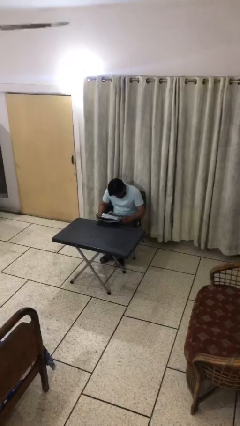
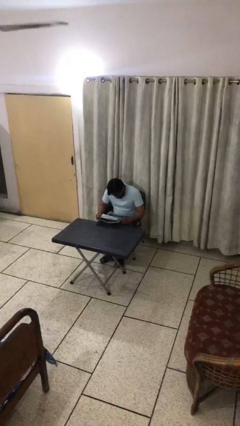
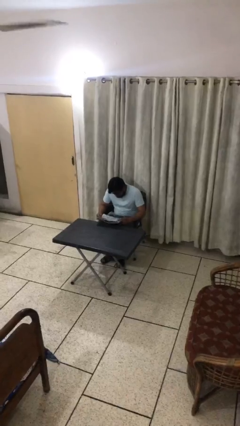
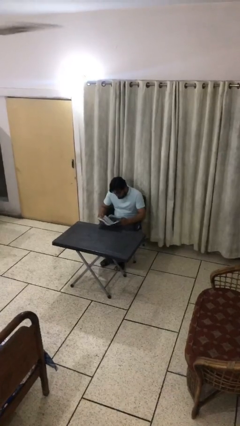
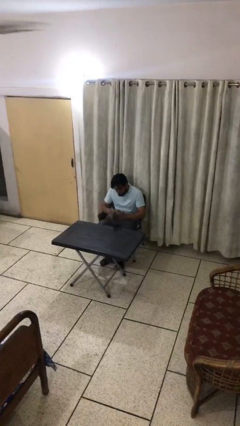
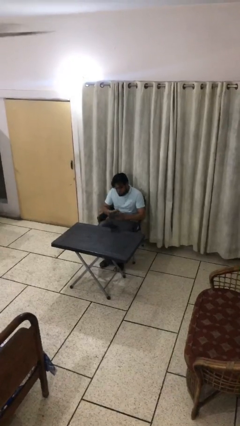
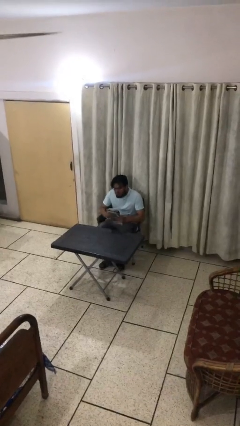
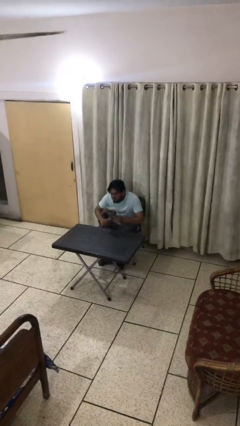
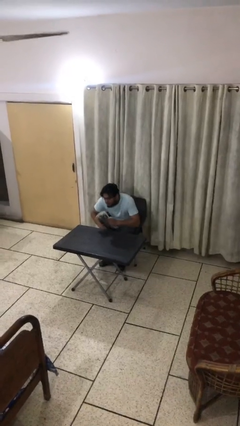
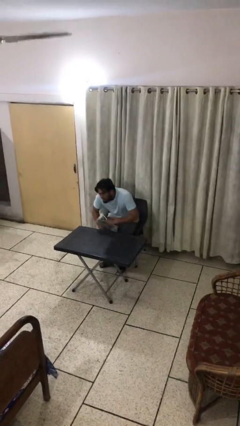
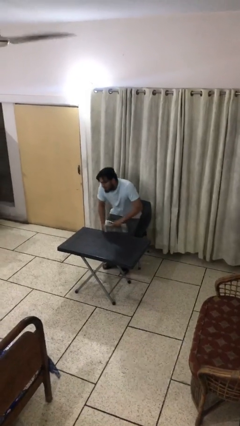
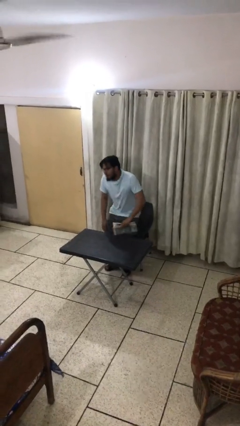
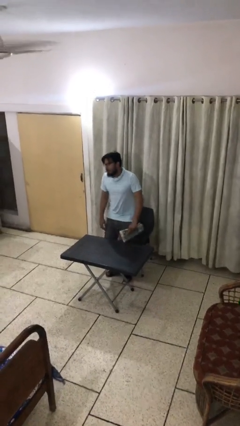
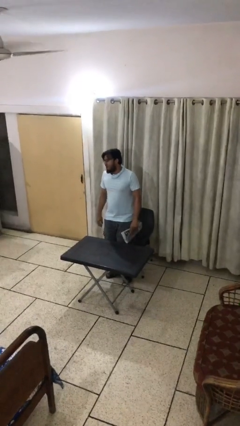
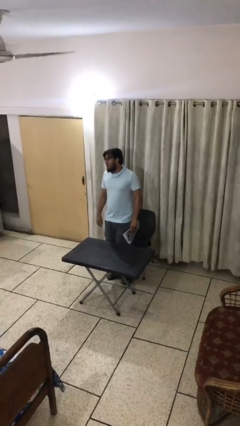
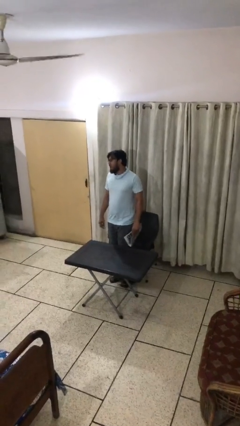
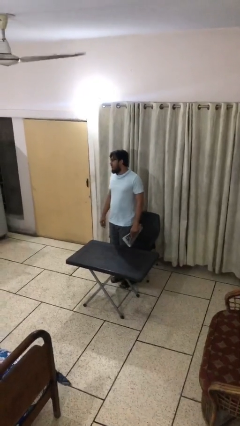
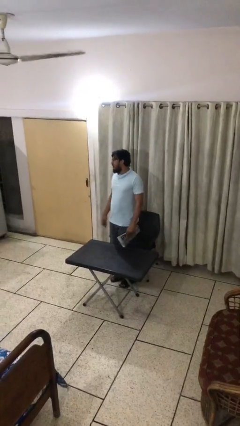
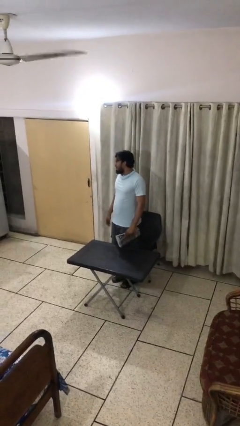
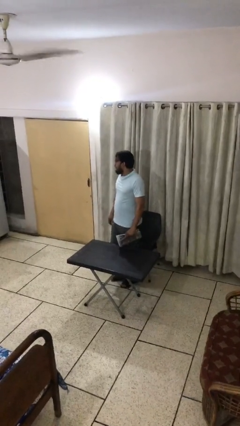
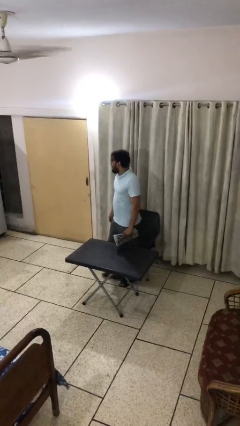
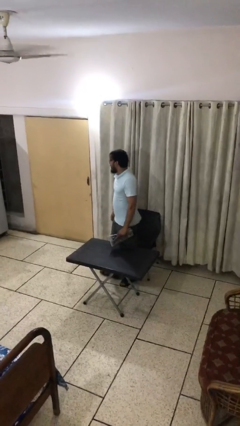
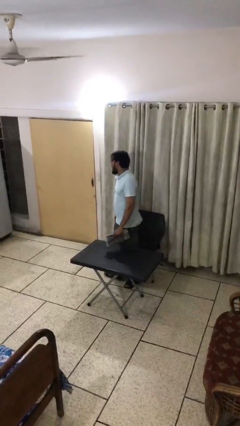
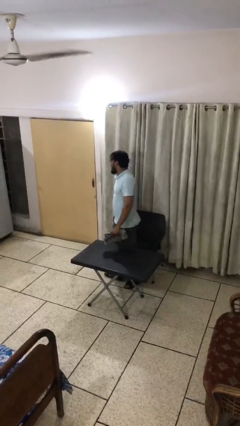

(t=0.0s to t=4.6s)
person stands up

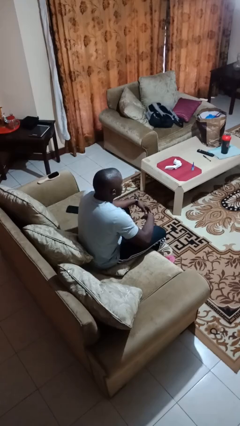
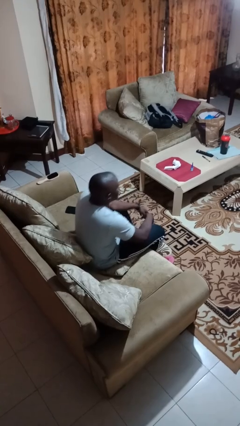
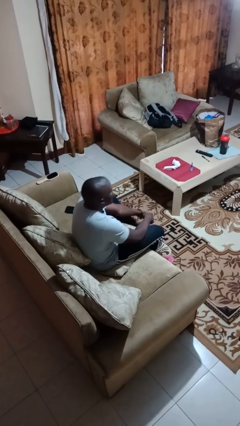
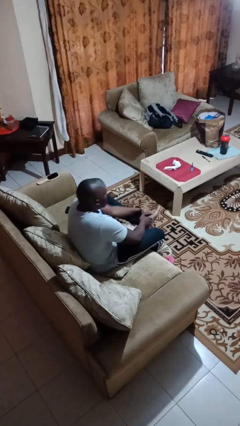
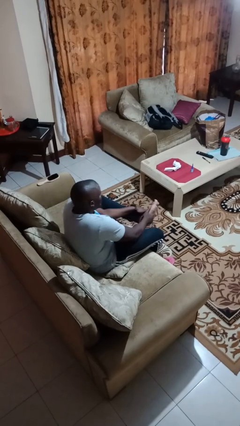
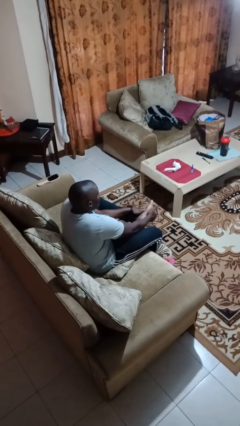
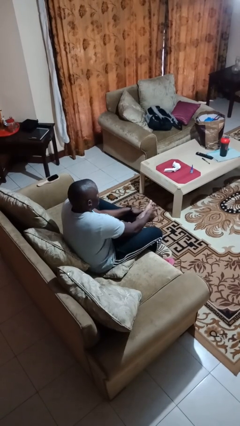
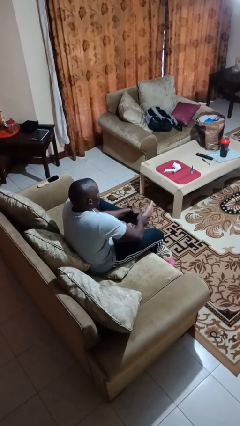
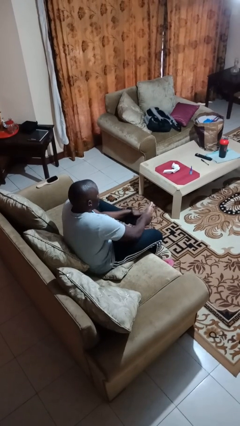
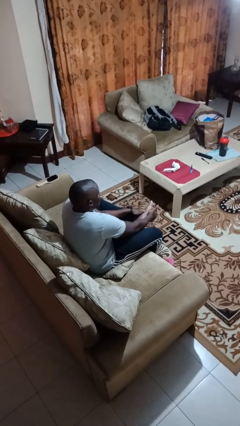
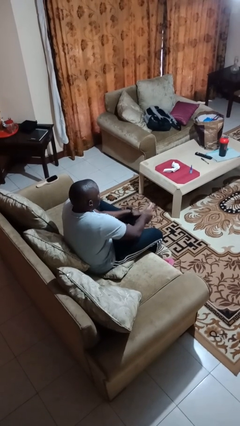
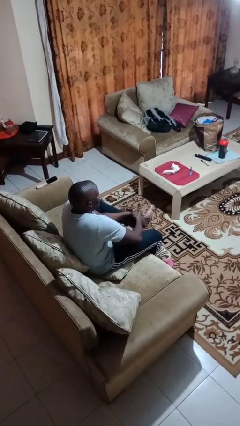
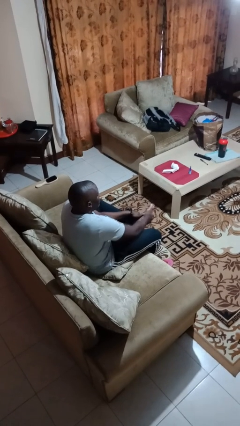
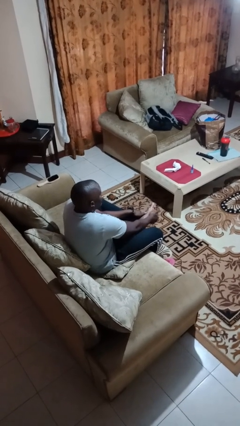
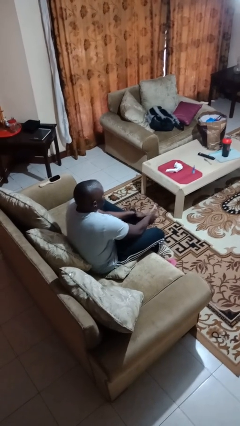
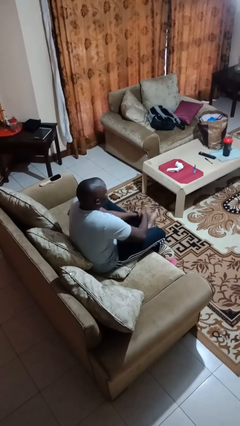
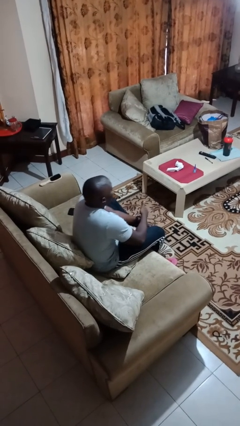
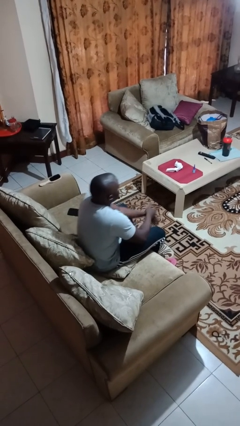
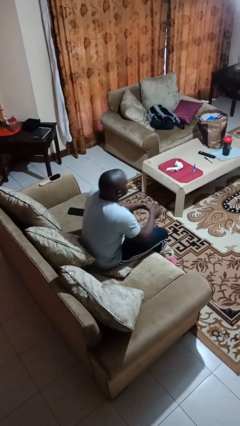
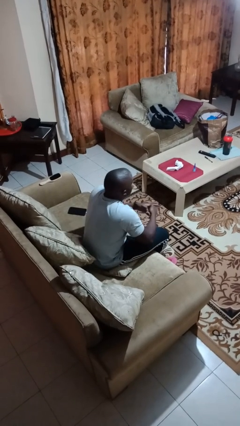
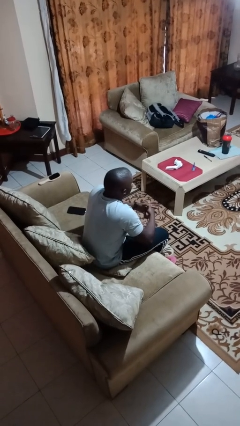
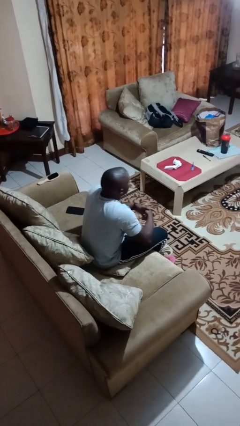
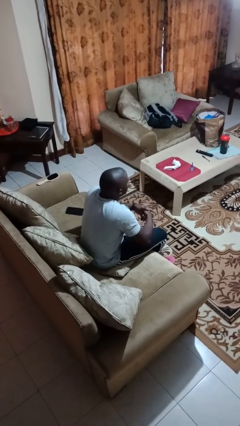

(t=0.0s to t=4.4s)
person rubs foot

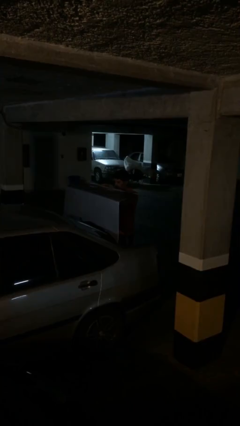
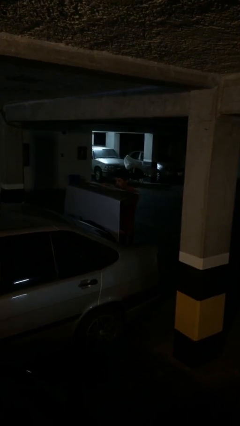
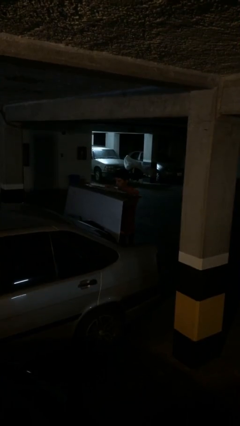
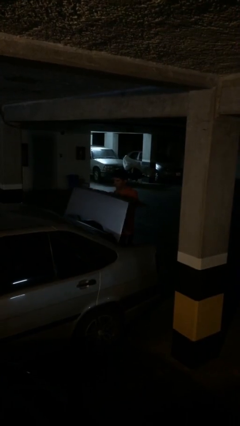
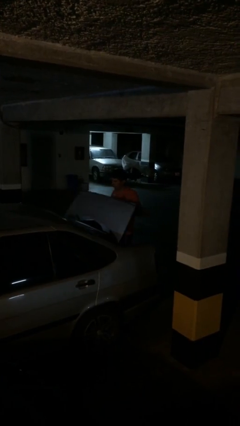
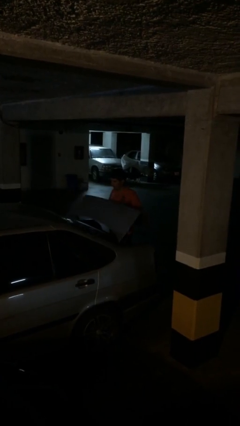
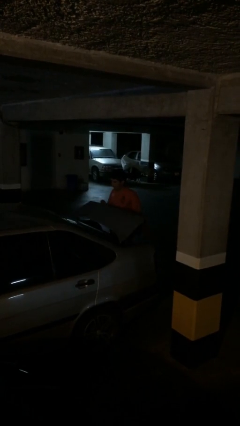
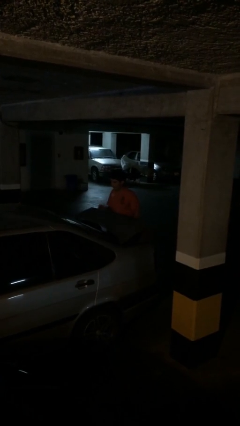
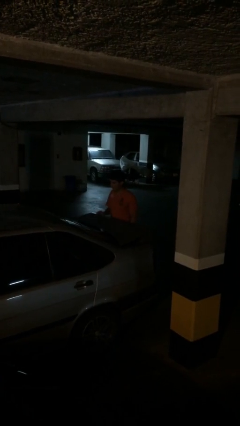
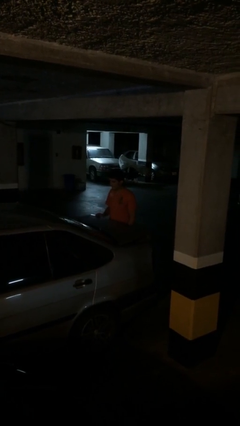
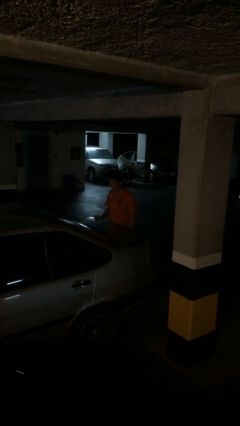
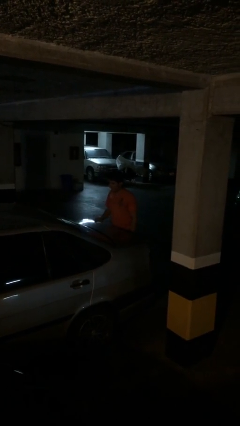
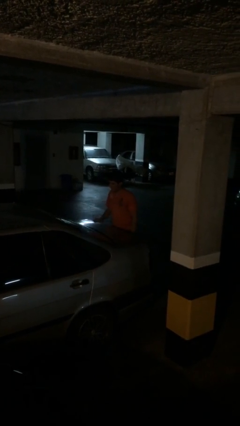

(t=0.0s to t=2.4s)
person closes car trunk

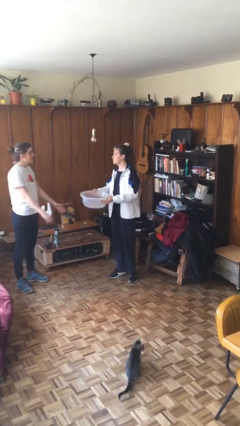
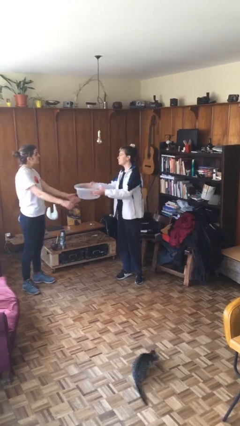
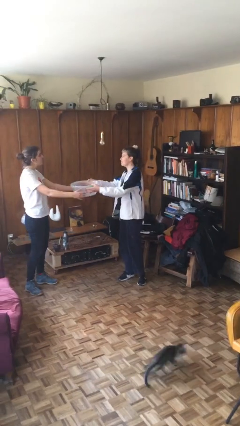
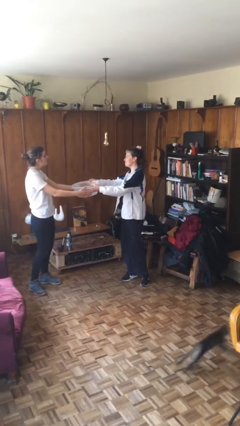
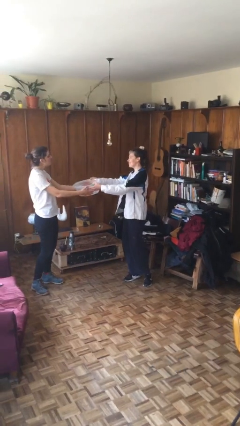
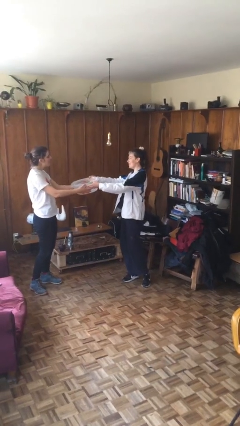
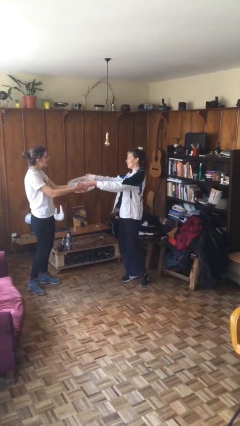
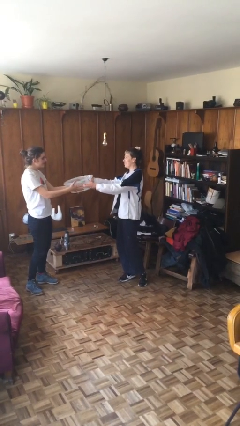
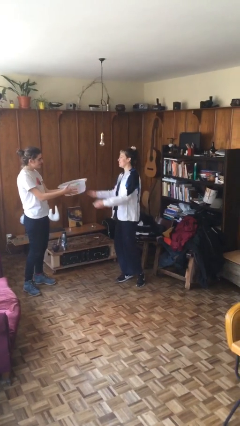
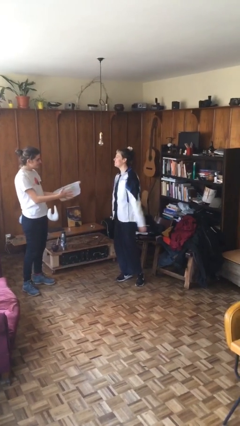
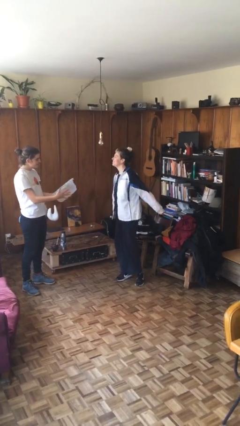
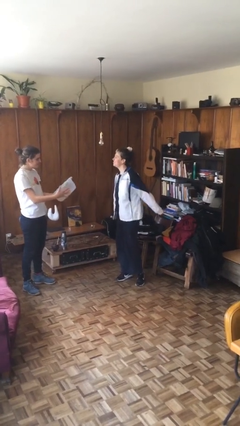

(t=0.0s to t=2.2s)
person transfers object to person

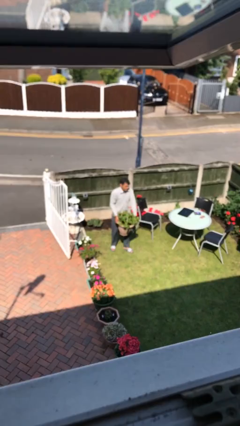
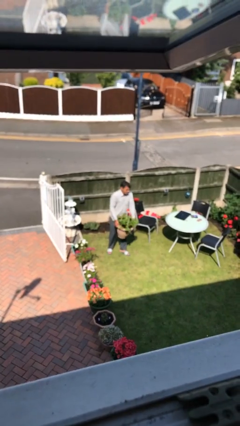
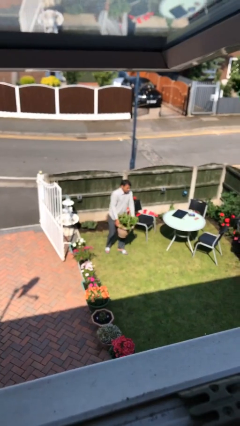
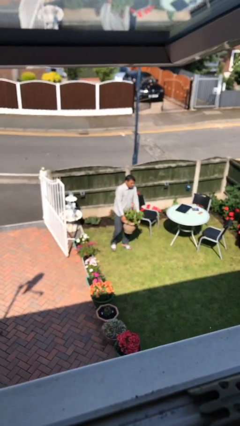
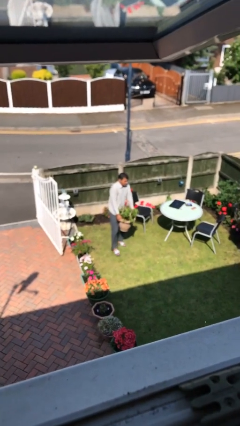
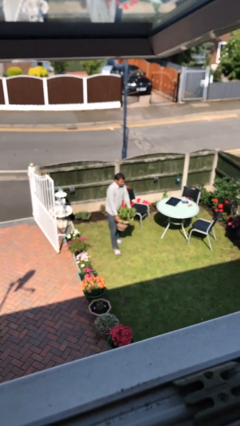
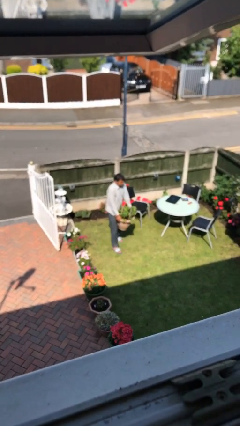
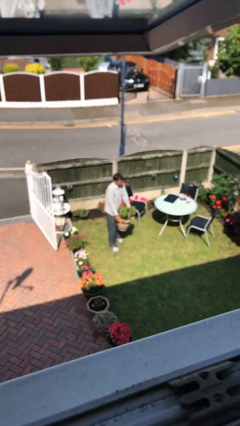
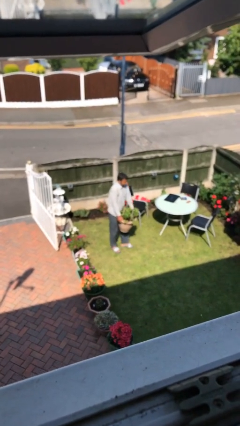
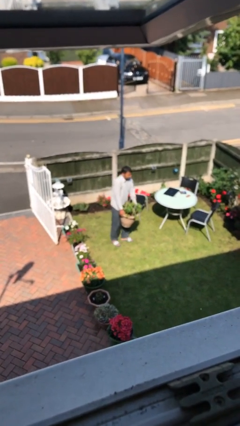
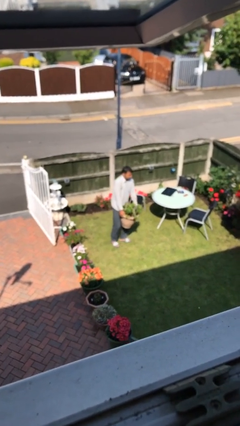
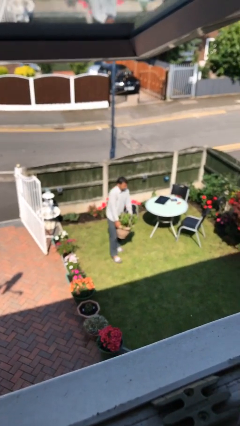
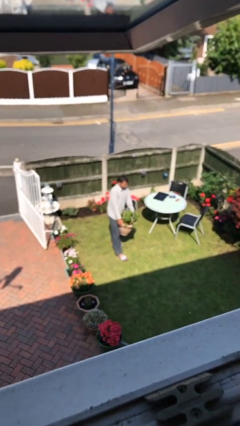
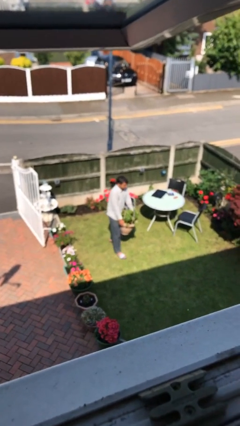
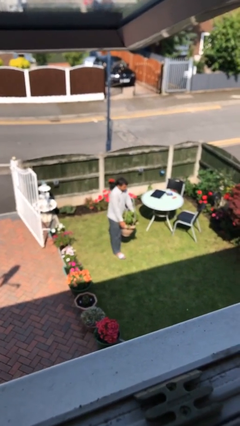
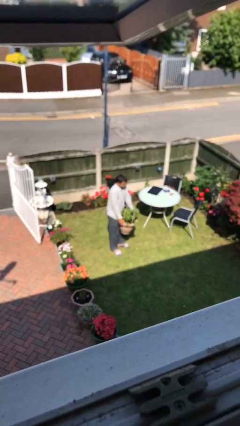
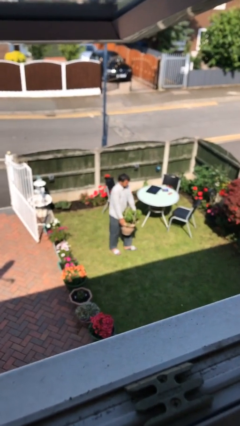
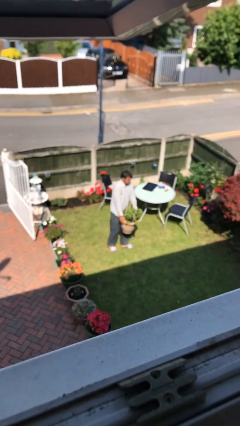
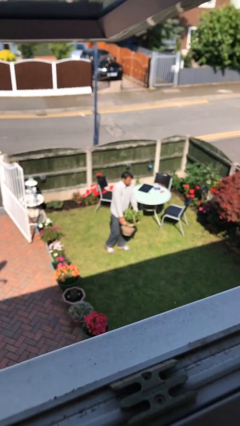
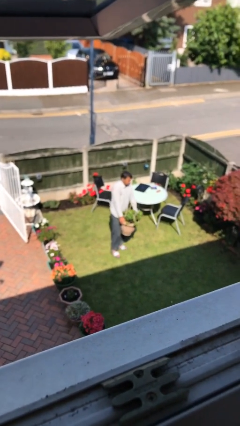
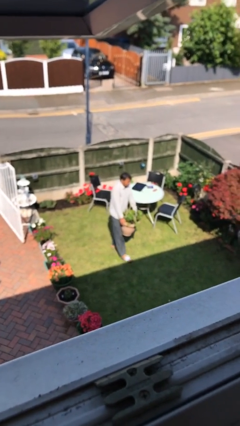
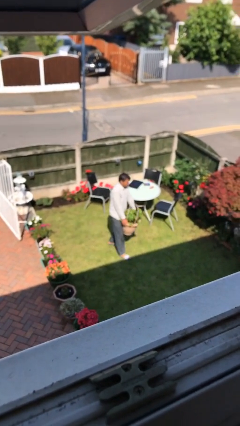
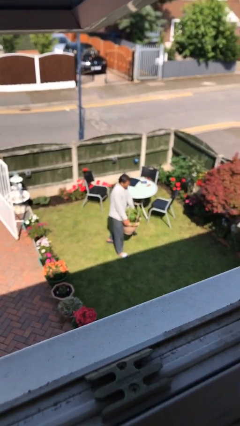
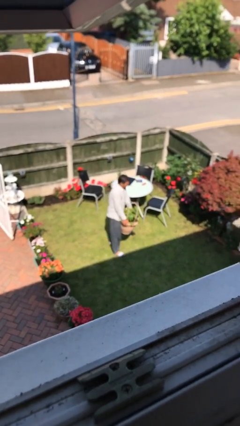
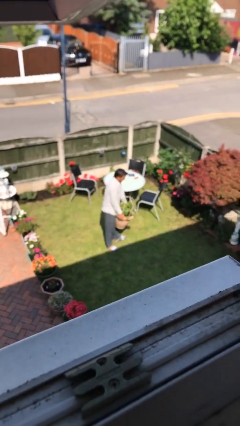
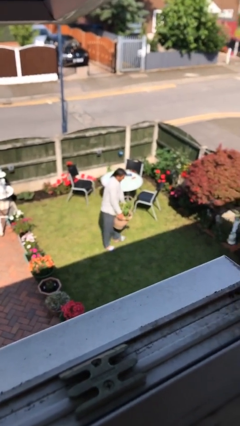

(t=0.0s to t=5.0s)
person carries heavy object
